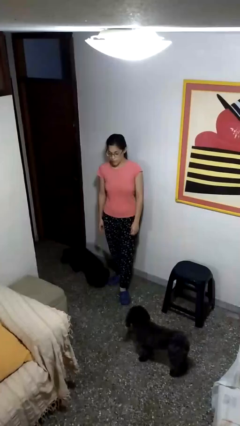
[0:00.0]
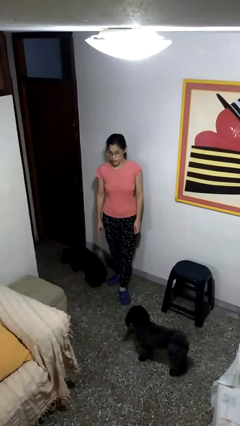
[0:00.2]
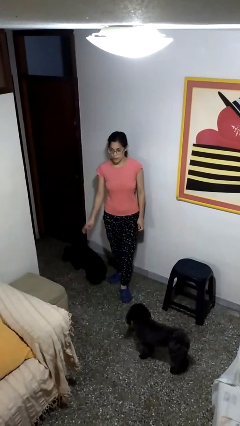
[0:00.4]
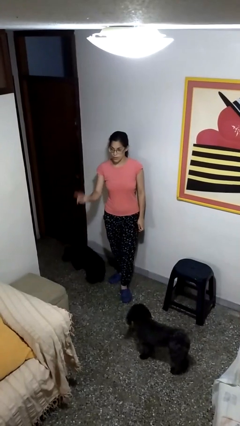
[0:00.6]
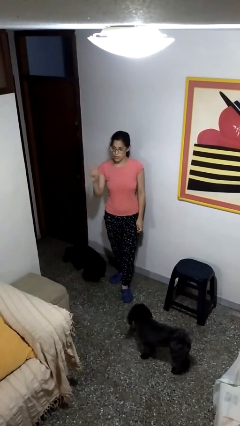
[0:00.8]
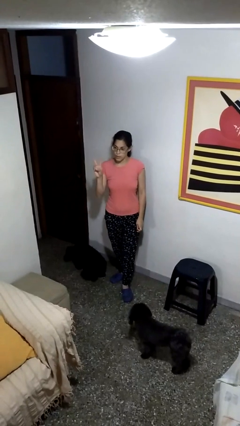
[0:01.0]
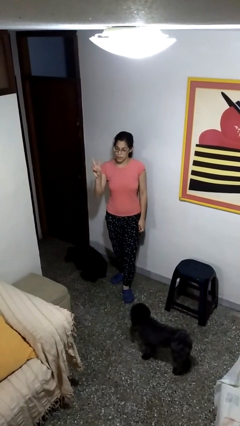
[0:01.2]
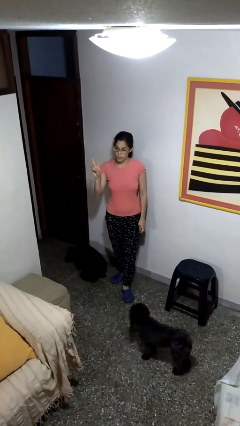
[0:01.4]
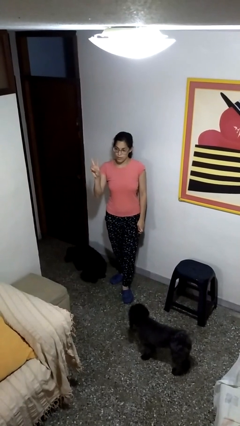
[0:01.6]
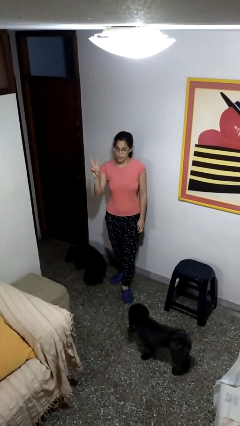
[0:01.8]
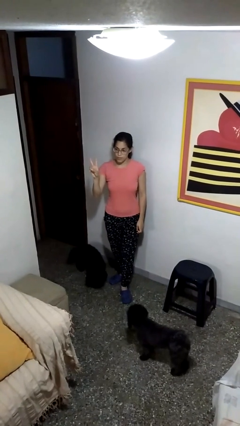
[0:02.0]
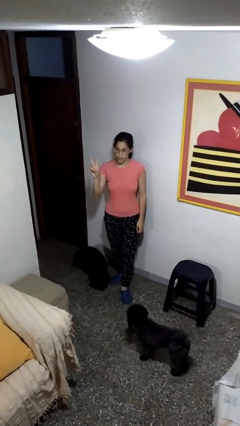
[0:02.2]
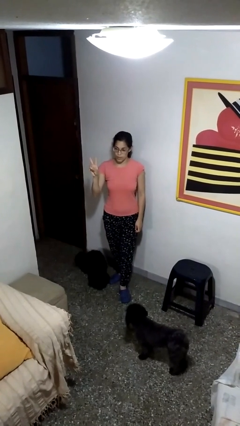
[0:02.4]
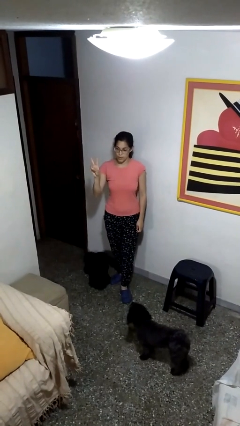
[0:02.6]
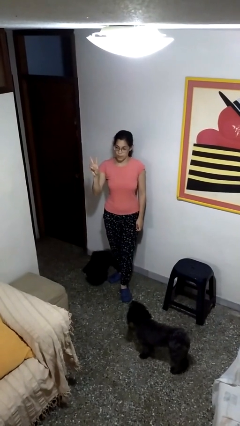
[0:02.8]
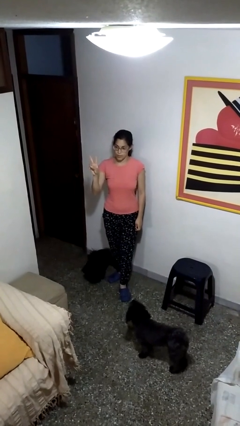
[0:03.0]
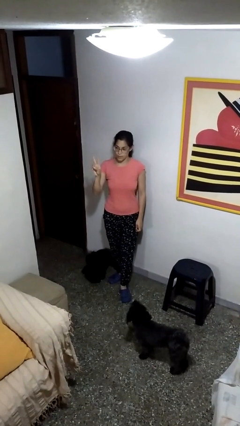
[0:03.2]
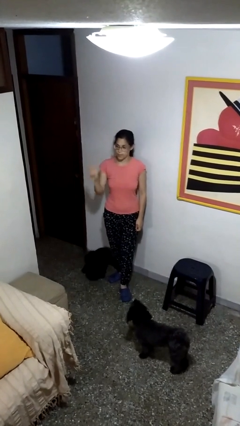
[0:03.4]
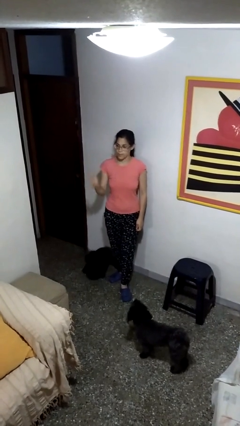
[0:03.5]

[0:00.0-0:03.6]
person gestures peace

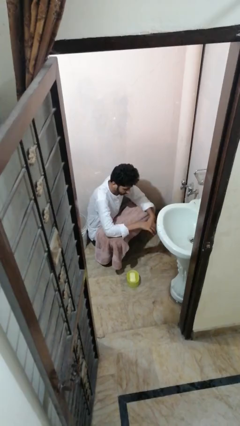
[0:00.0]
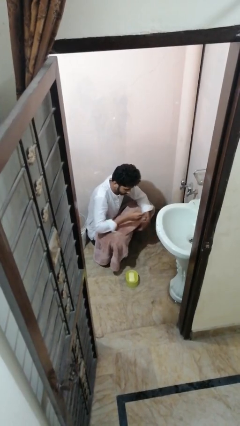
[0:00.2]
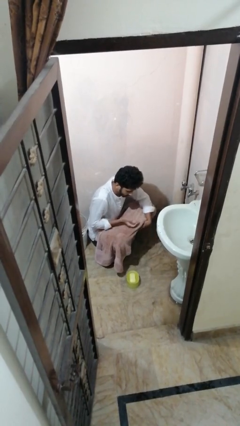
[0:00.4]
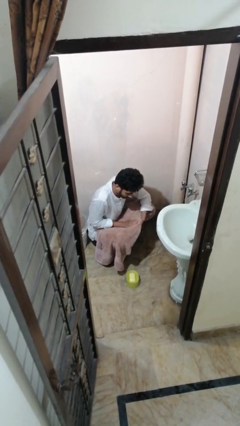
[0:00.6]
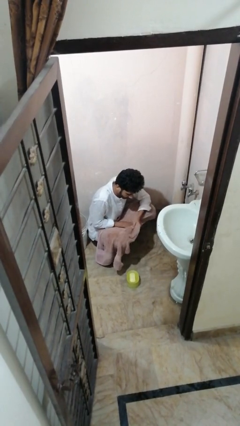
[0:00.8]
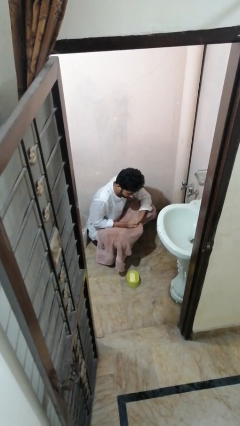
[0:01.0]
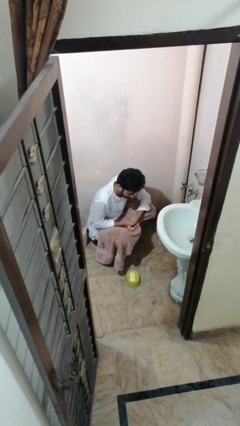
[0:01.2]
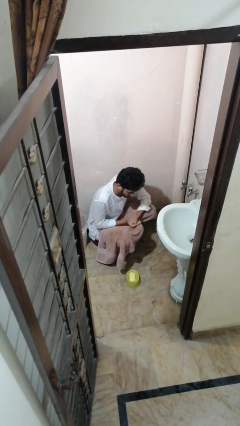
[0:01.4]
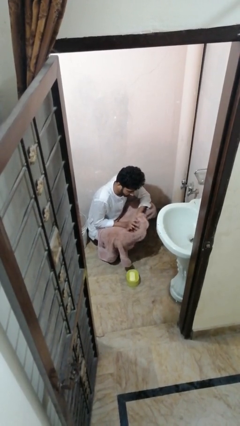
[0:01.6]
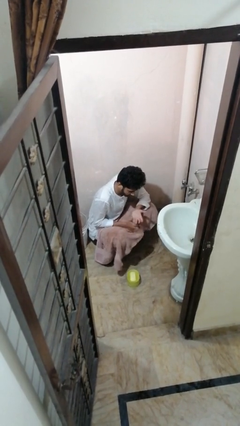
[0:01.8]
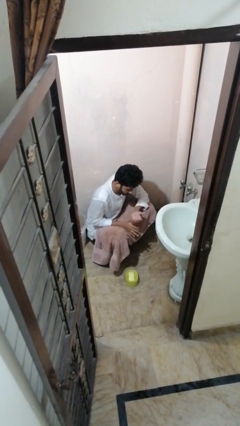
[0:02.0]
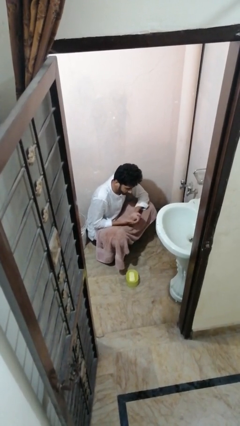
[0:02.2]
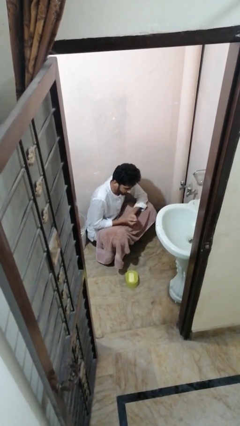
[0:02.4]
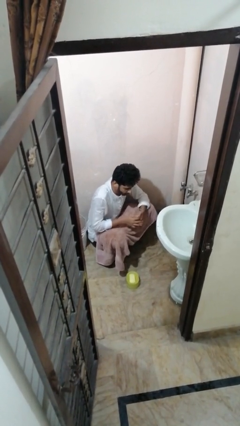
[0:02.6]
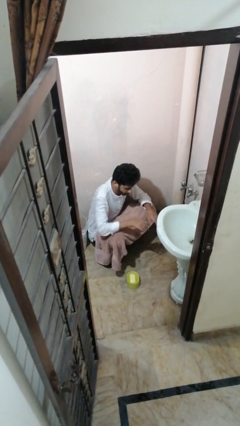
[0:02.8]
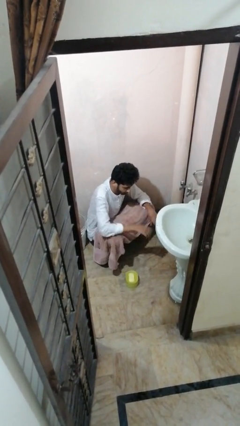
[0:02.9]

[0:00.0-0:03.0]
person dries hands with towel

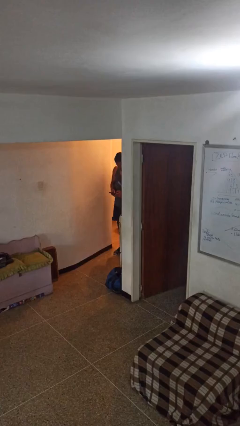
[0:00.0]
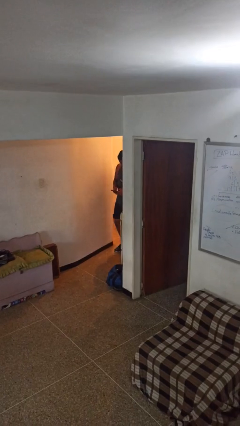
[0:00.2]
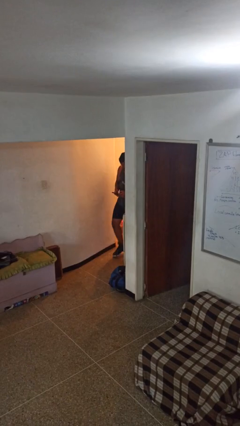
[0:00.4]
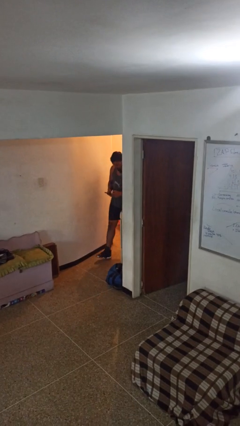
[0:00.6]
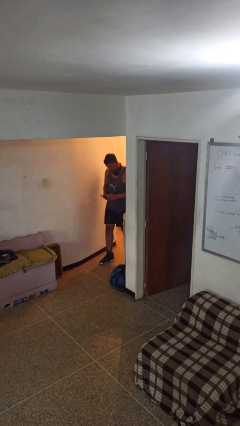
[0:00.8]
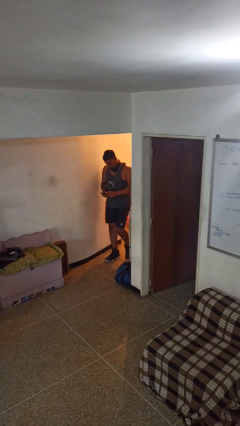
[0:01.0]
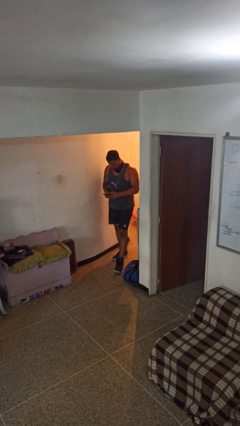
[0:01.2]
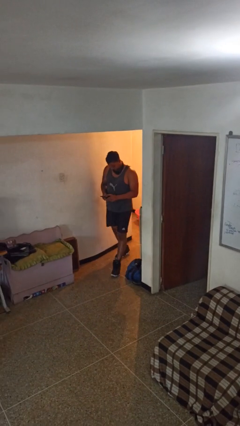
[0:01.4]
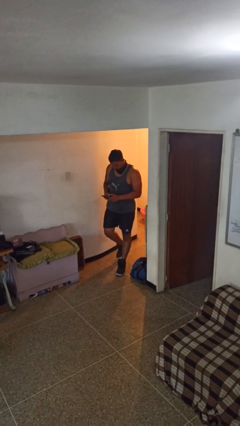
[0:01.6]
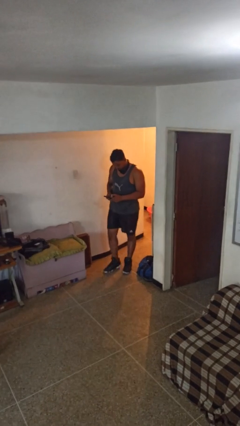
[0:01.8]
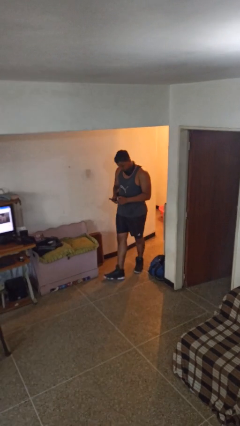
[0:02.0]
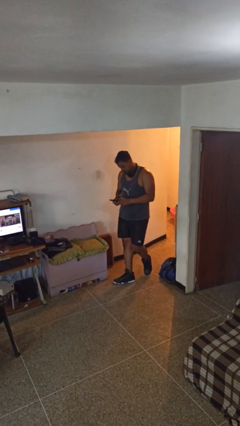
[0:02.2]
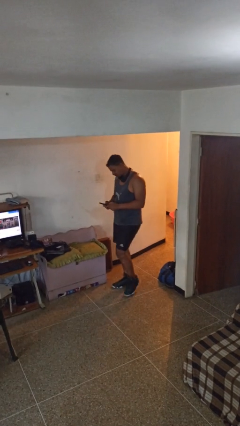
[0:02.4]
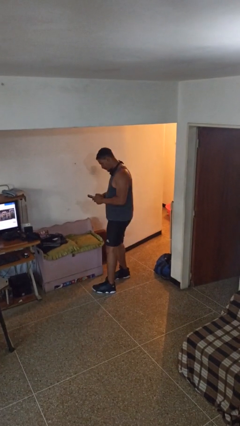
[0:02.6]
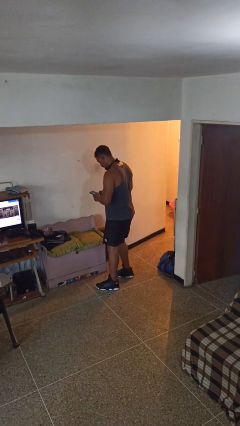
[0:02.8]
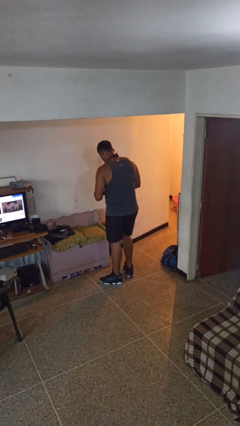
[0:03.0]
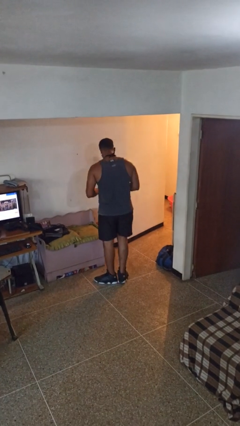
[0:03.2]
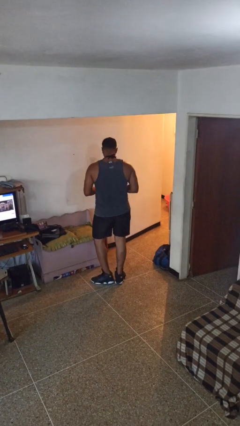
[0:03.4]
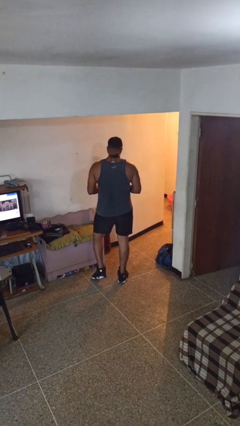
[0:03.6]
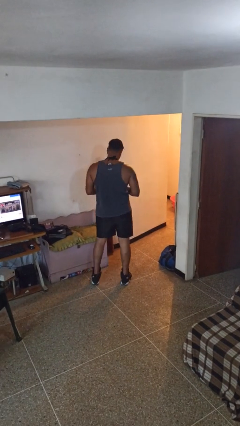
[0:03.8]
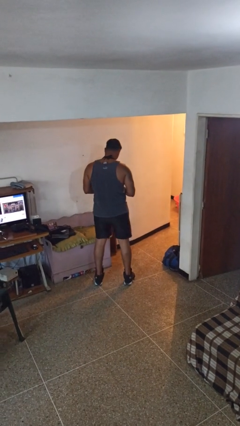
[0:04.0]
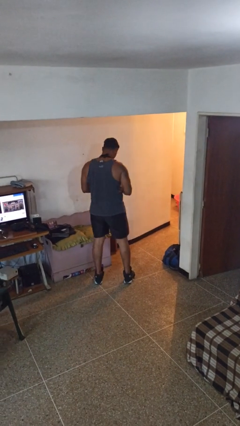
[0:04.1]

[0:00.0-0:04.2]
person enters scene through structure

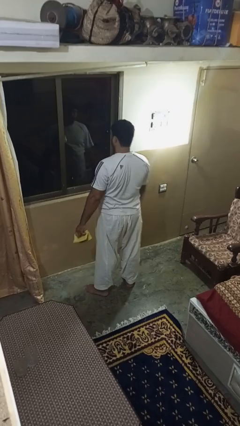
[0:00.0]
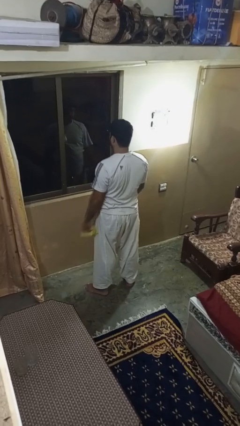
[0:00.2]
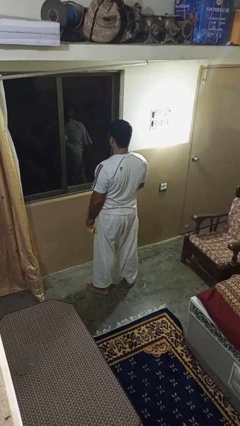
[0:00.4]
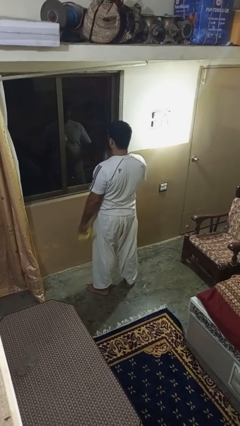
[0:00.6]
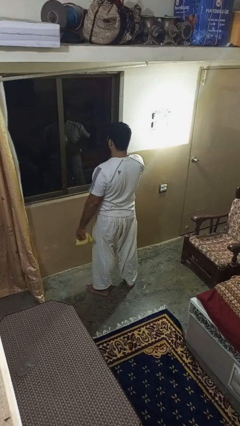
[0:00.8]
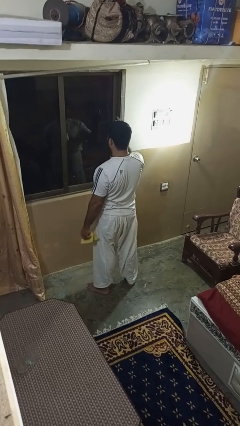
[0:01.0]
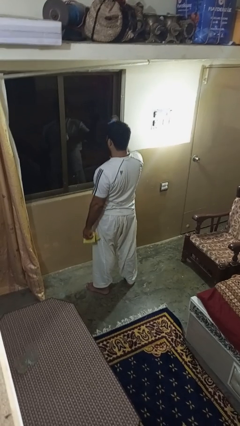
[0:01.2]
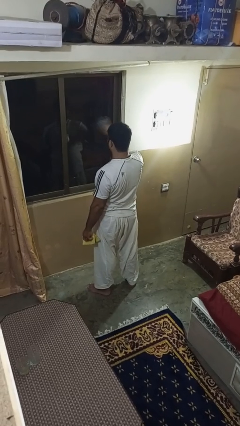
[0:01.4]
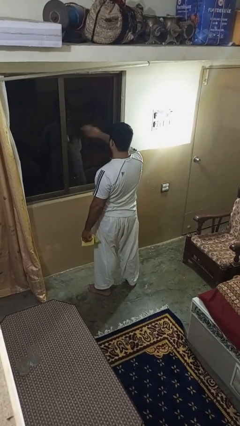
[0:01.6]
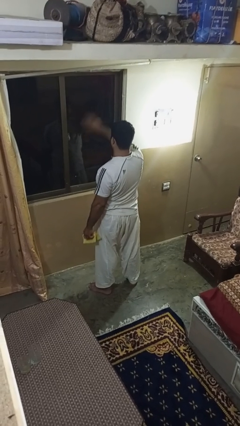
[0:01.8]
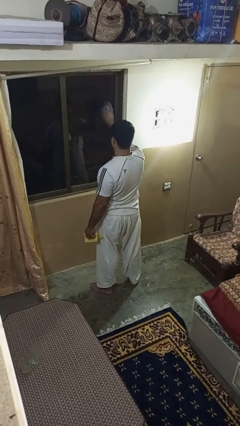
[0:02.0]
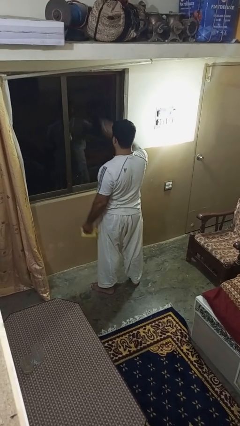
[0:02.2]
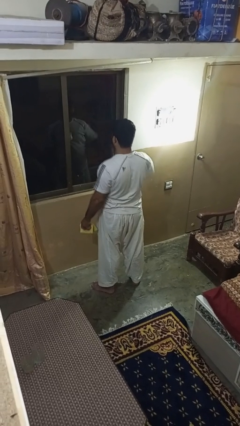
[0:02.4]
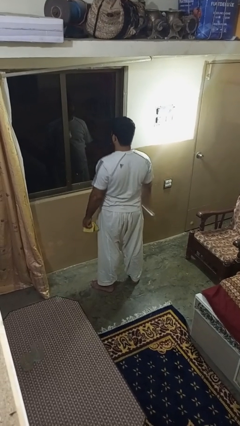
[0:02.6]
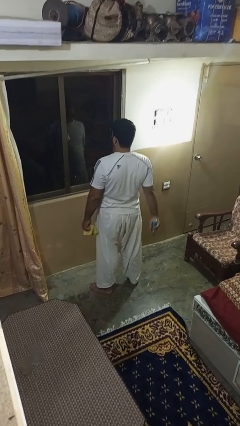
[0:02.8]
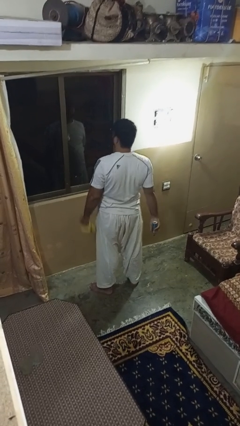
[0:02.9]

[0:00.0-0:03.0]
person sprays from bottle

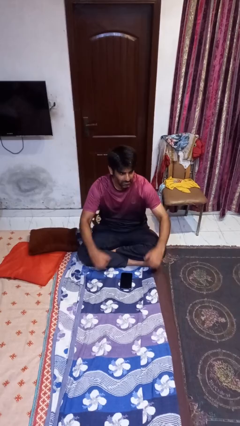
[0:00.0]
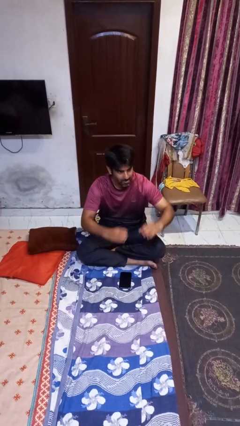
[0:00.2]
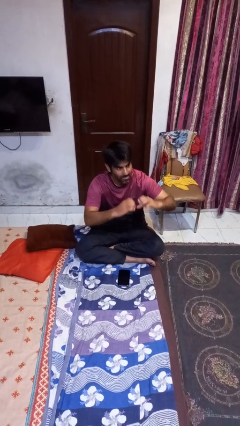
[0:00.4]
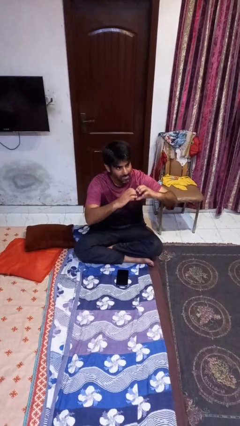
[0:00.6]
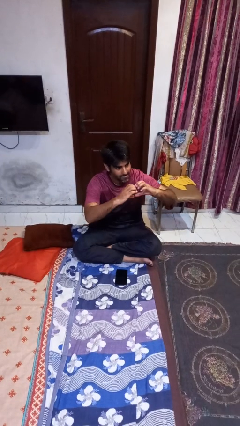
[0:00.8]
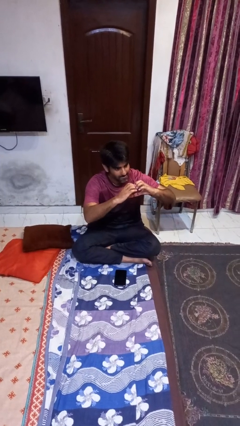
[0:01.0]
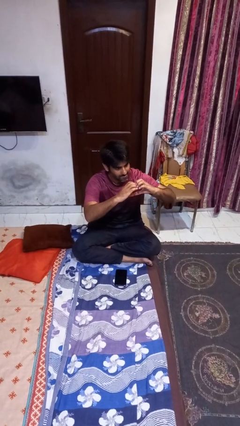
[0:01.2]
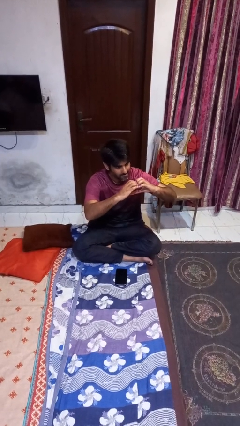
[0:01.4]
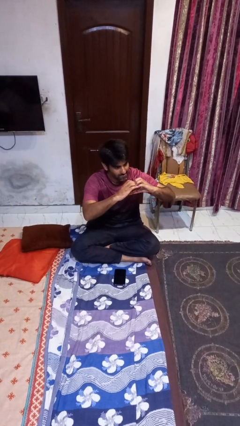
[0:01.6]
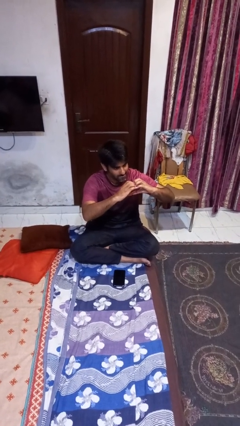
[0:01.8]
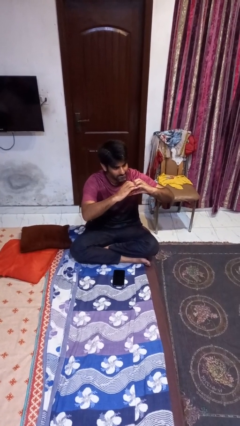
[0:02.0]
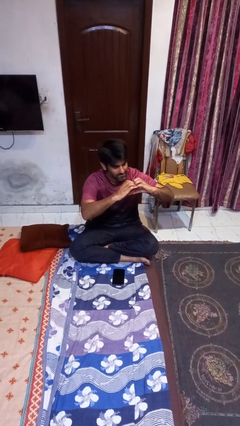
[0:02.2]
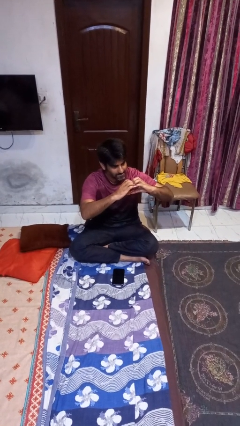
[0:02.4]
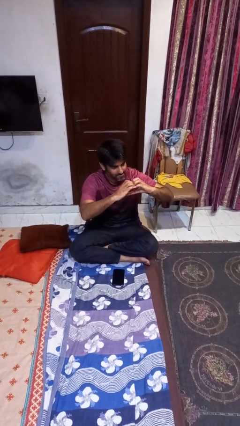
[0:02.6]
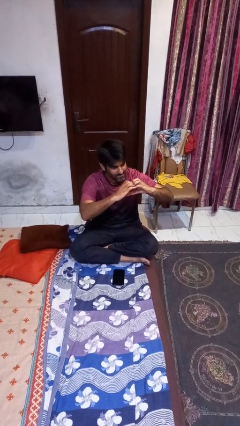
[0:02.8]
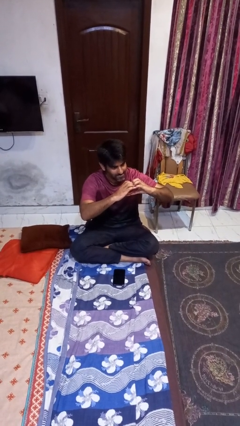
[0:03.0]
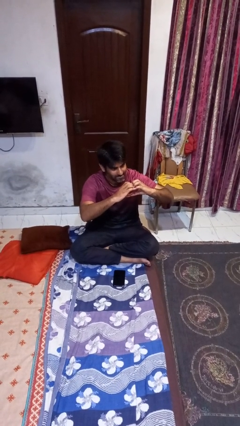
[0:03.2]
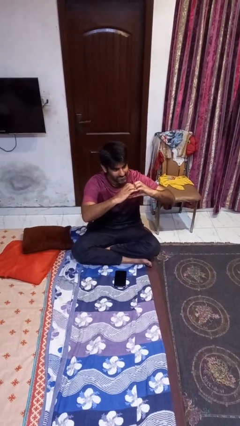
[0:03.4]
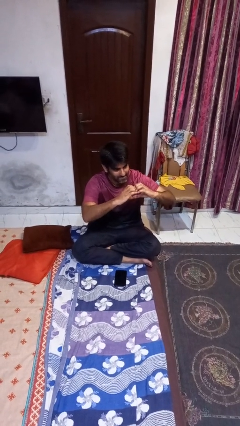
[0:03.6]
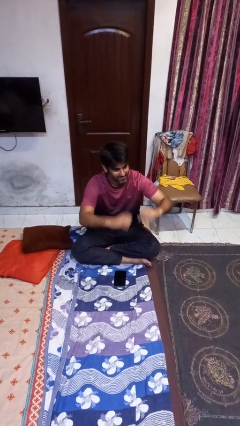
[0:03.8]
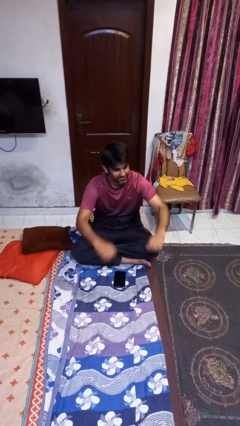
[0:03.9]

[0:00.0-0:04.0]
person gestures heart

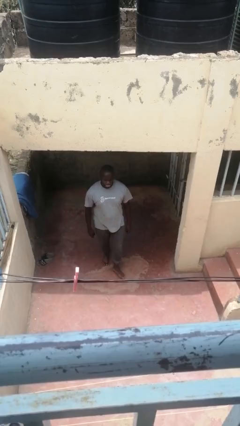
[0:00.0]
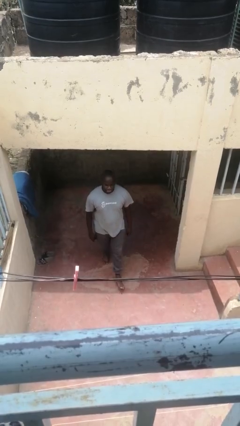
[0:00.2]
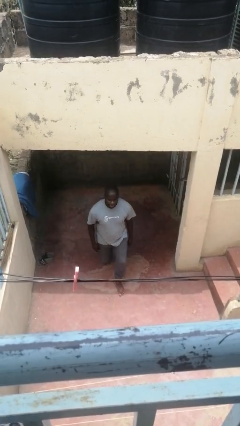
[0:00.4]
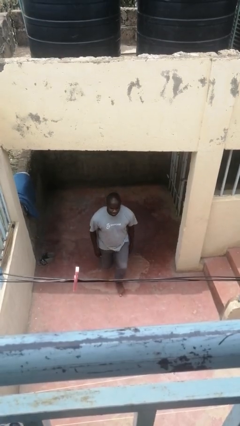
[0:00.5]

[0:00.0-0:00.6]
person exercises with lunges
